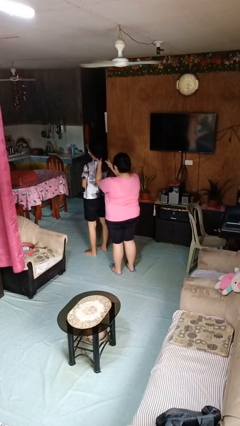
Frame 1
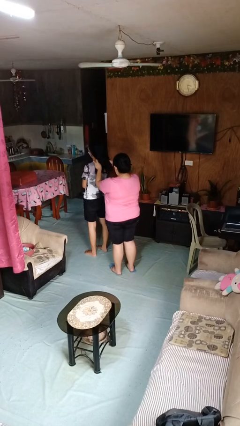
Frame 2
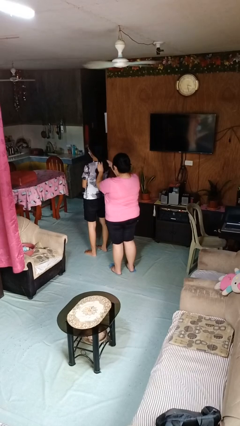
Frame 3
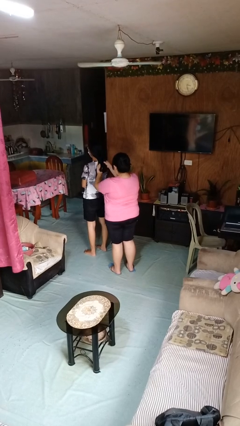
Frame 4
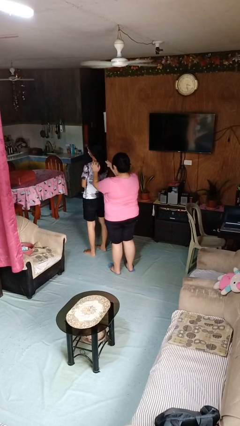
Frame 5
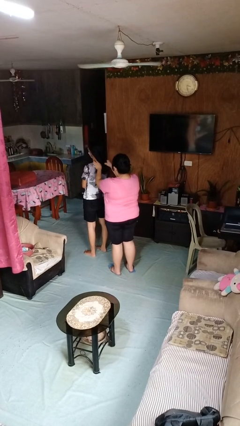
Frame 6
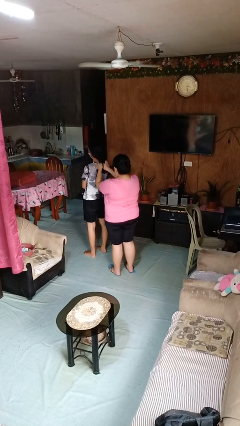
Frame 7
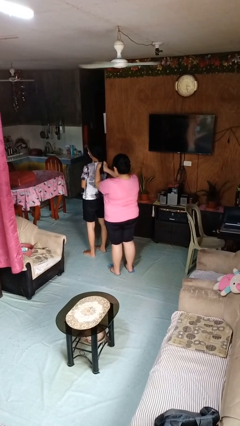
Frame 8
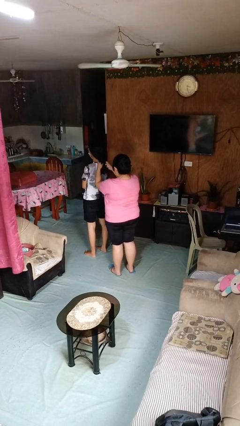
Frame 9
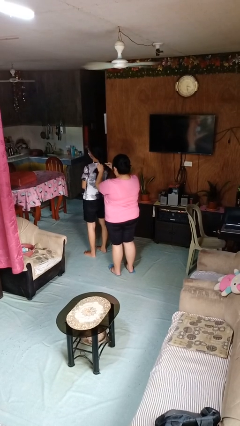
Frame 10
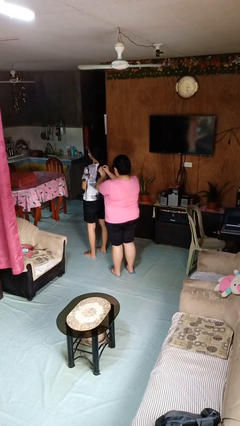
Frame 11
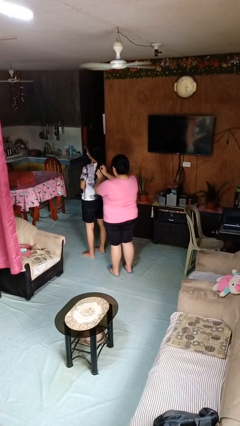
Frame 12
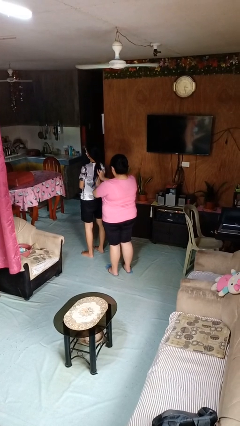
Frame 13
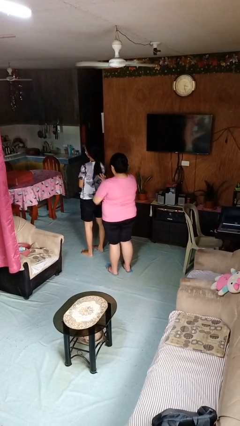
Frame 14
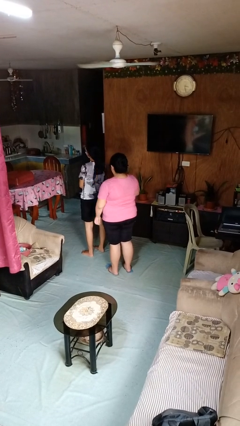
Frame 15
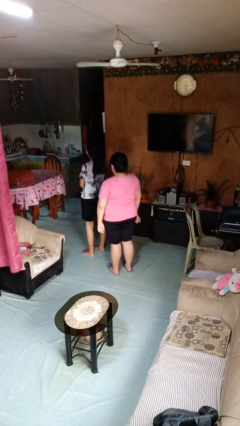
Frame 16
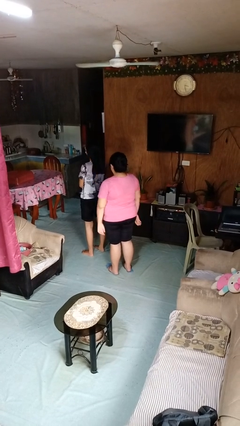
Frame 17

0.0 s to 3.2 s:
person braids hair of person

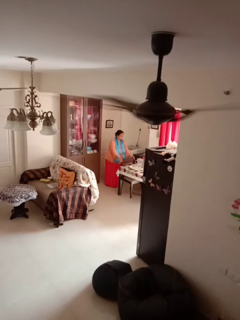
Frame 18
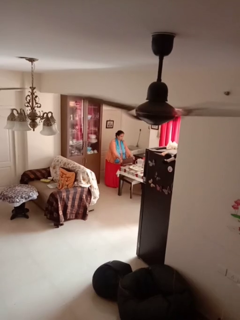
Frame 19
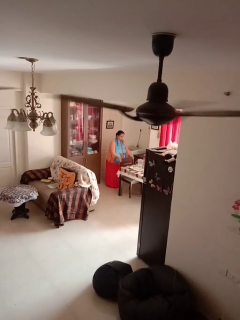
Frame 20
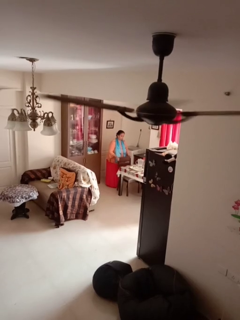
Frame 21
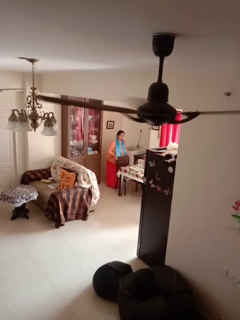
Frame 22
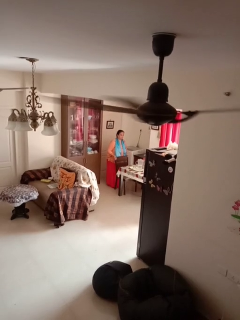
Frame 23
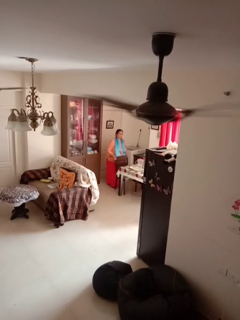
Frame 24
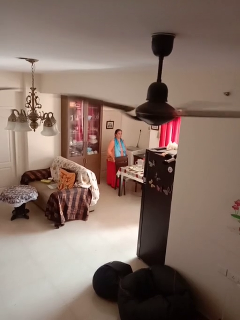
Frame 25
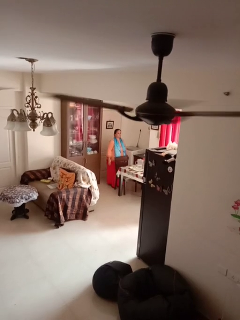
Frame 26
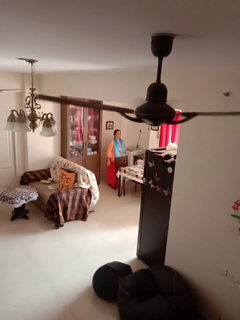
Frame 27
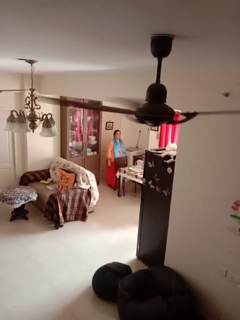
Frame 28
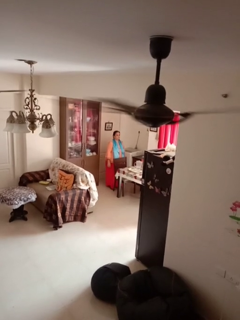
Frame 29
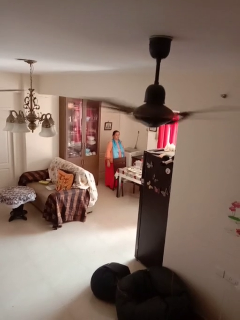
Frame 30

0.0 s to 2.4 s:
person pulls out chair

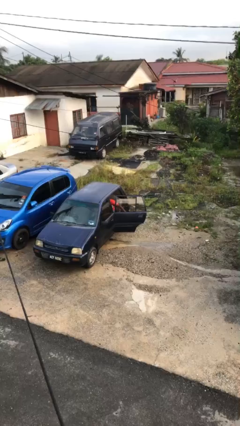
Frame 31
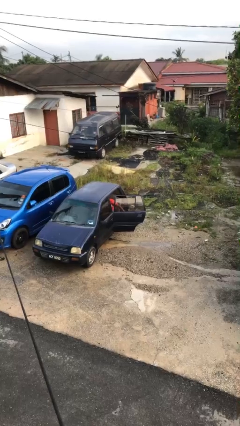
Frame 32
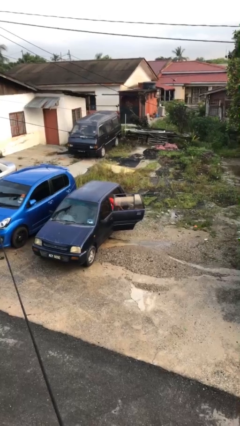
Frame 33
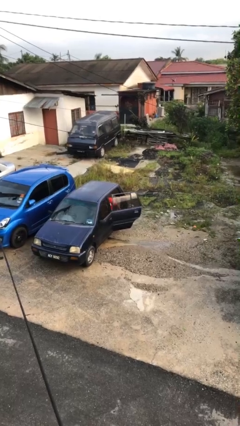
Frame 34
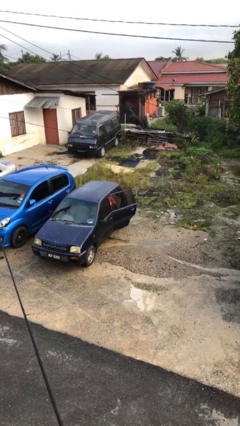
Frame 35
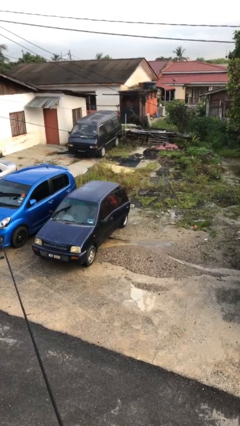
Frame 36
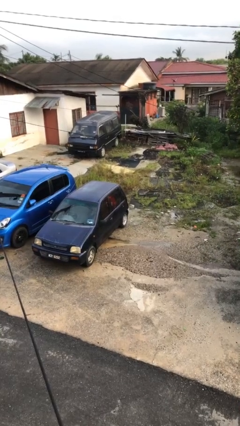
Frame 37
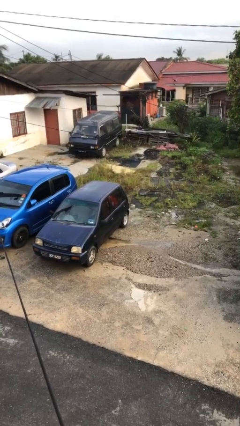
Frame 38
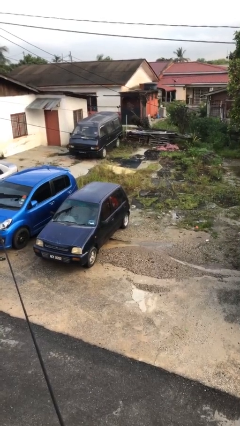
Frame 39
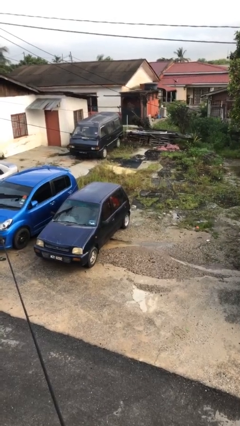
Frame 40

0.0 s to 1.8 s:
person closes car door

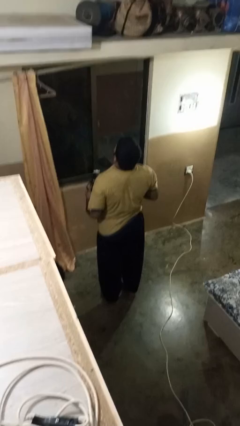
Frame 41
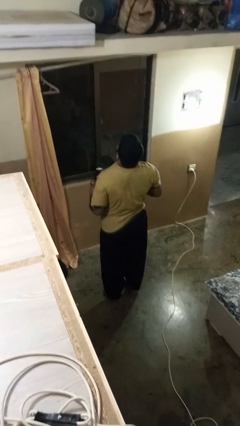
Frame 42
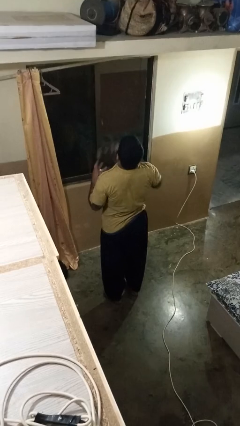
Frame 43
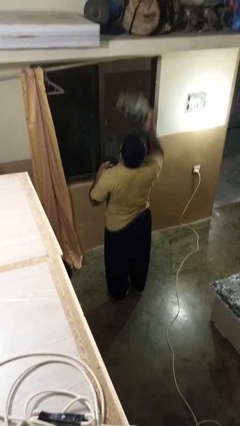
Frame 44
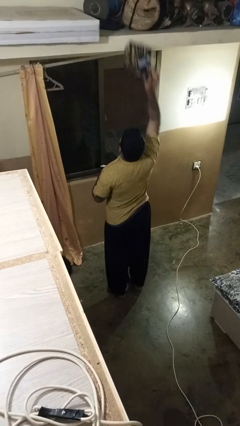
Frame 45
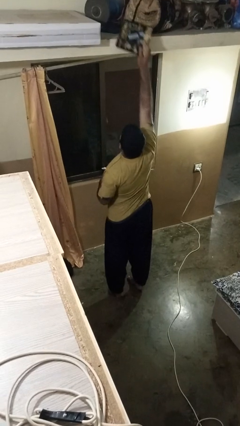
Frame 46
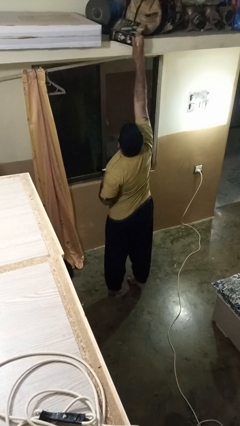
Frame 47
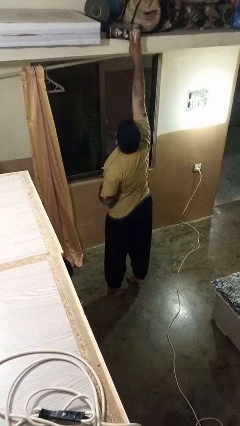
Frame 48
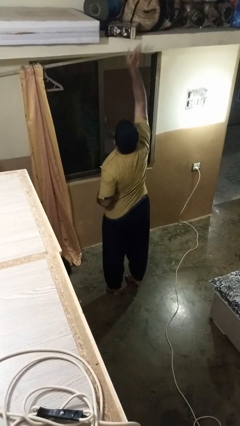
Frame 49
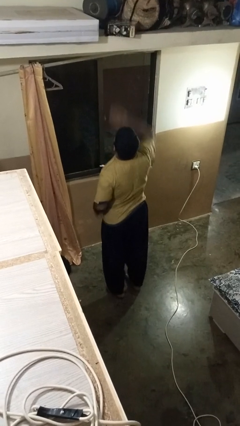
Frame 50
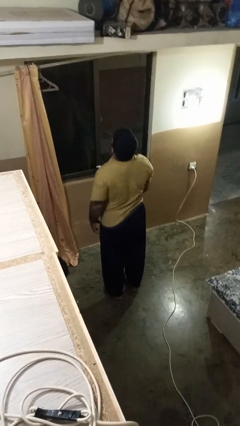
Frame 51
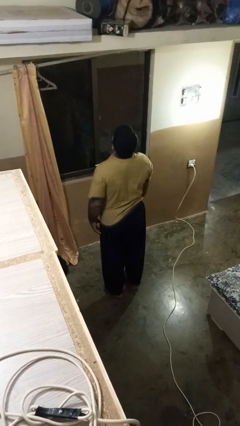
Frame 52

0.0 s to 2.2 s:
person puts down object on shelf

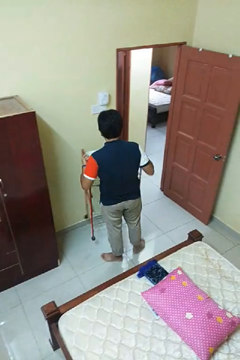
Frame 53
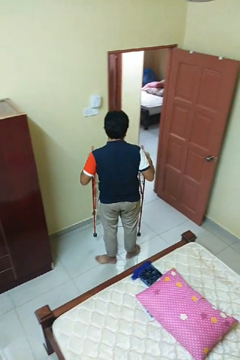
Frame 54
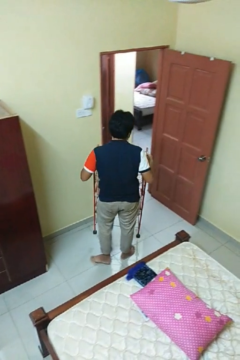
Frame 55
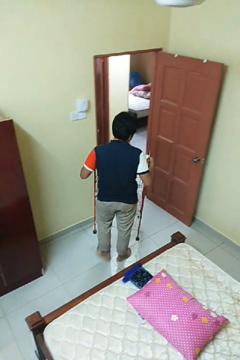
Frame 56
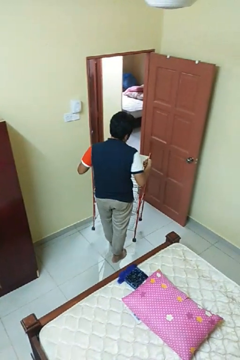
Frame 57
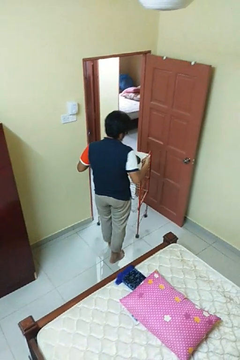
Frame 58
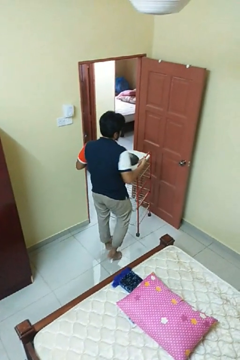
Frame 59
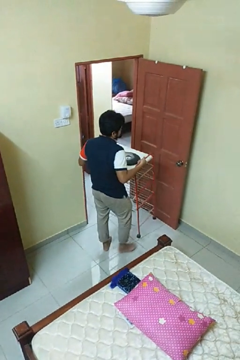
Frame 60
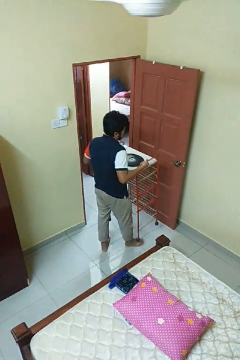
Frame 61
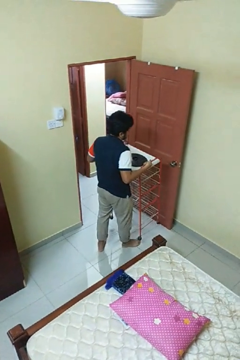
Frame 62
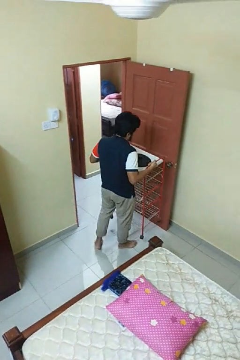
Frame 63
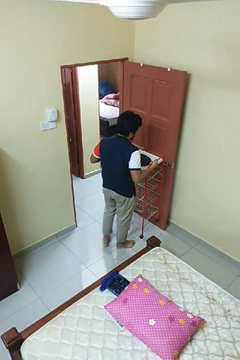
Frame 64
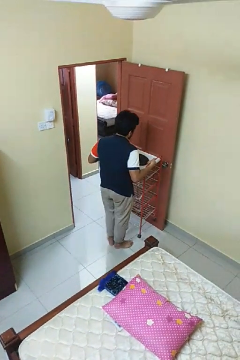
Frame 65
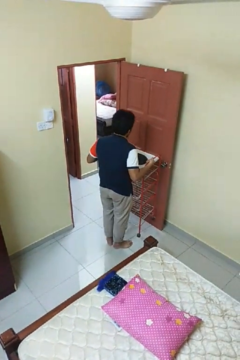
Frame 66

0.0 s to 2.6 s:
person carries furniture

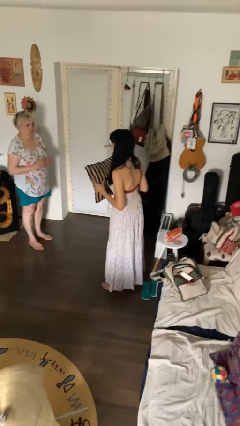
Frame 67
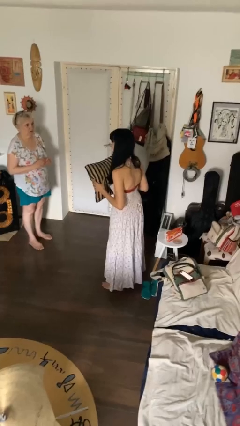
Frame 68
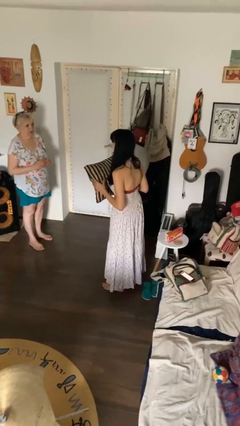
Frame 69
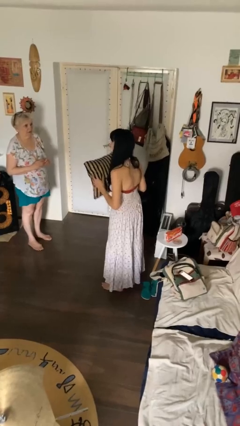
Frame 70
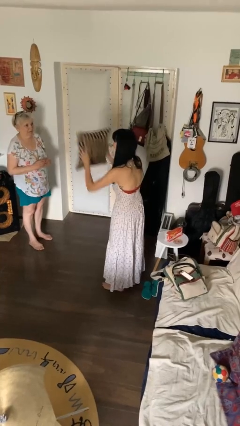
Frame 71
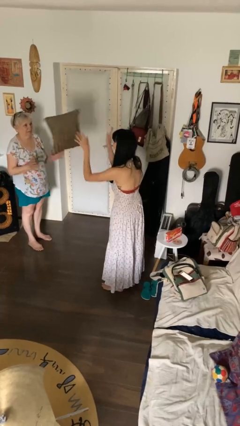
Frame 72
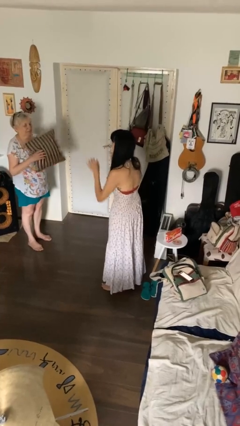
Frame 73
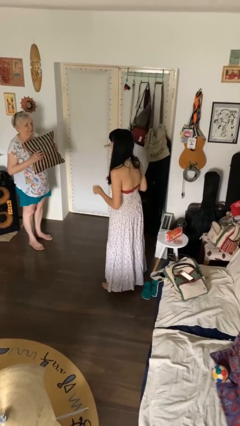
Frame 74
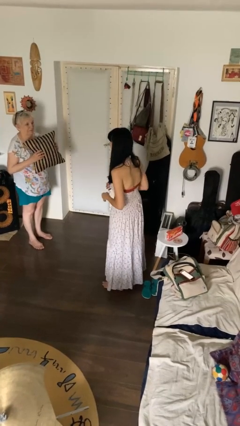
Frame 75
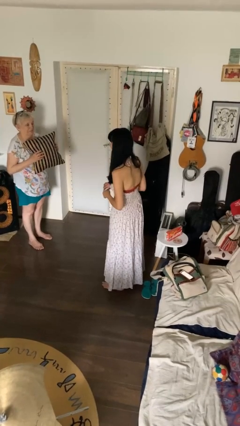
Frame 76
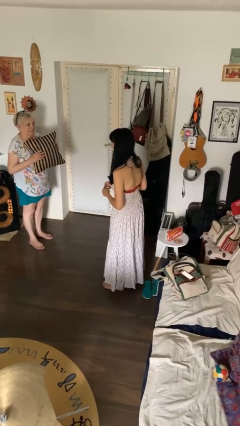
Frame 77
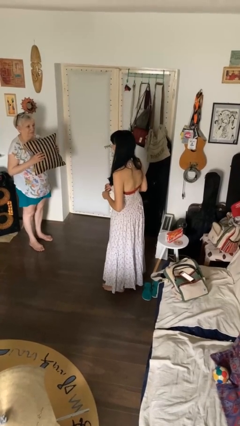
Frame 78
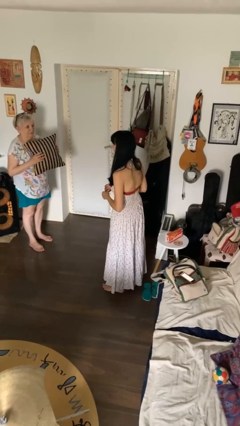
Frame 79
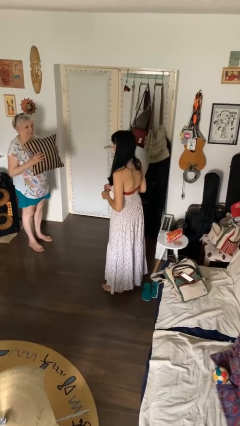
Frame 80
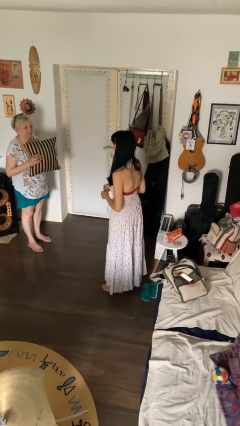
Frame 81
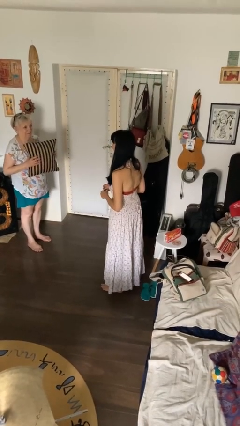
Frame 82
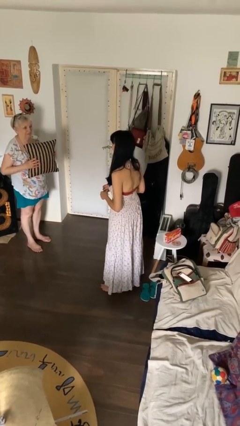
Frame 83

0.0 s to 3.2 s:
person throws object to person

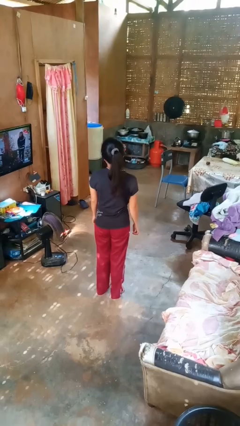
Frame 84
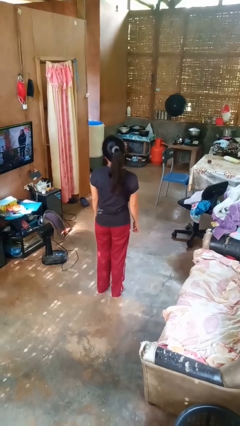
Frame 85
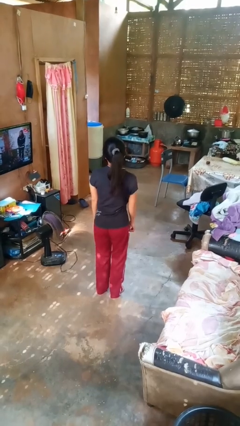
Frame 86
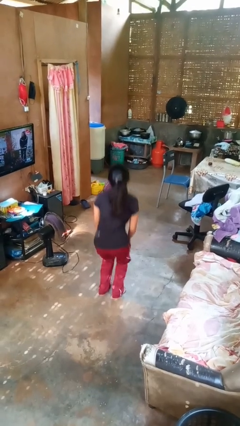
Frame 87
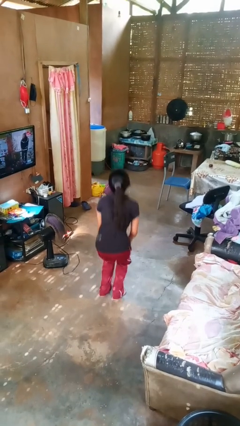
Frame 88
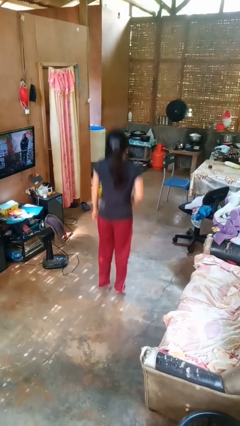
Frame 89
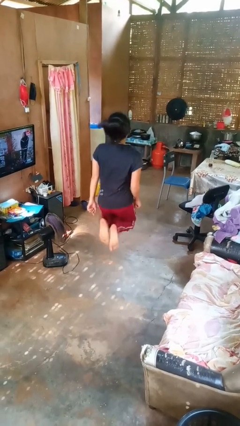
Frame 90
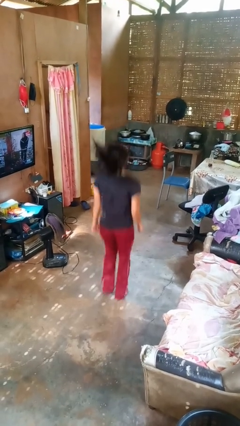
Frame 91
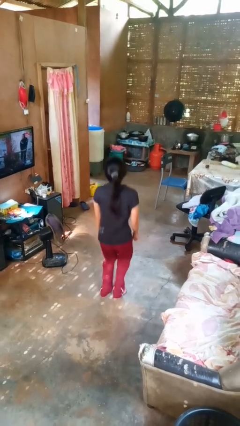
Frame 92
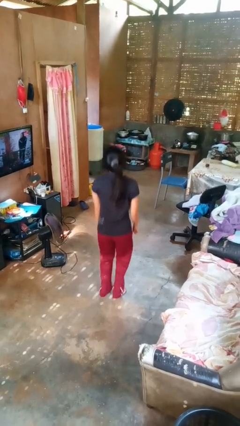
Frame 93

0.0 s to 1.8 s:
person jumps

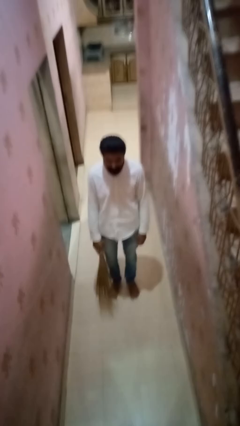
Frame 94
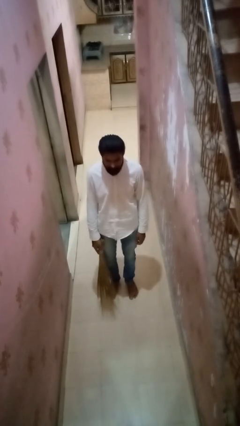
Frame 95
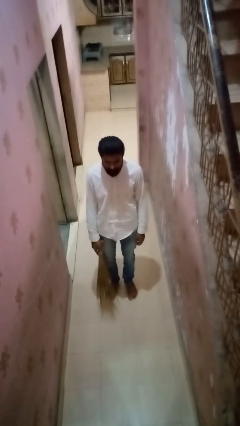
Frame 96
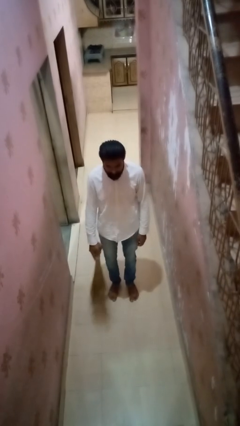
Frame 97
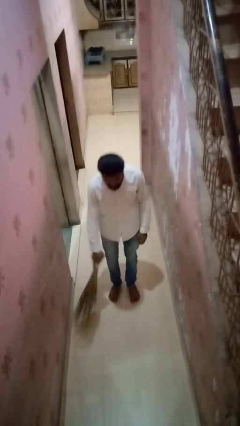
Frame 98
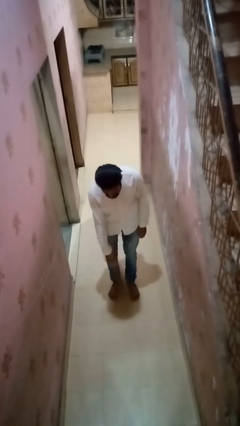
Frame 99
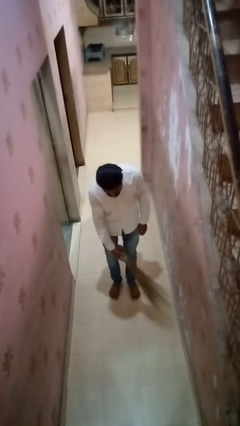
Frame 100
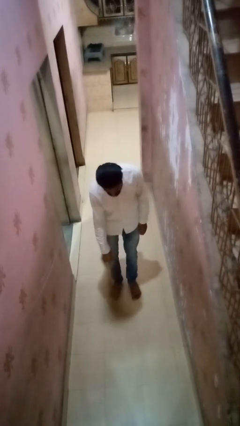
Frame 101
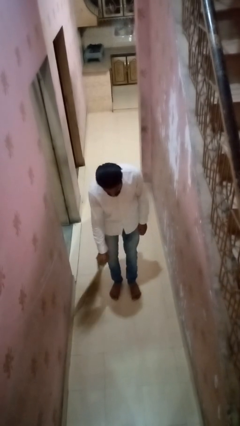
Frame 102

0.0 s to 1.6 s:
person sweeps floor
